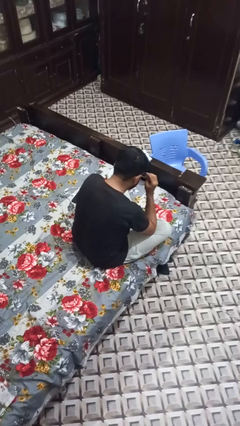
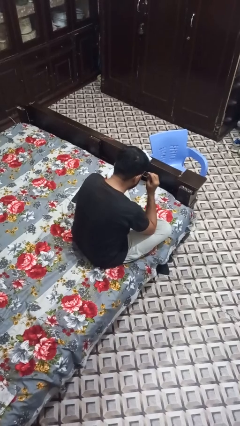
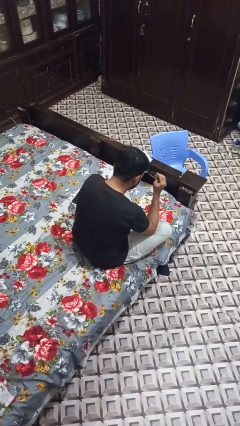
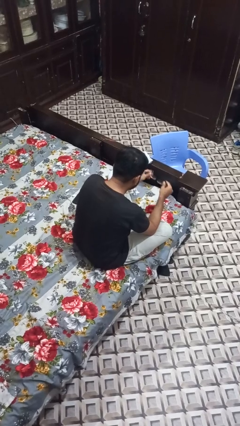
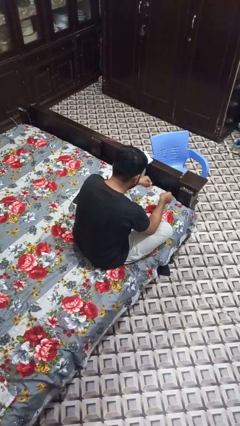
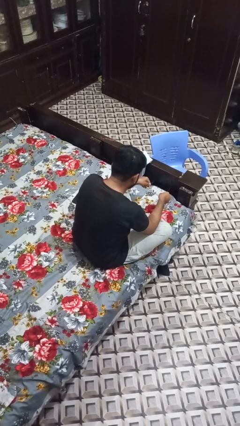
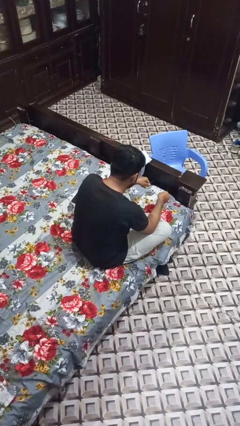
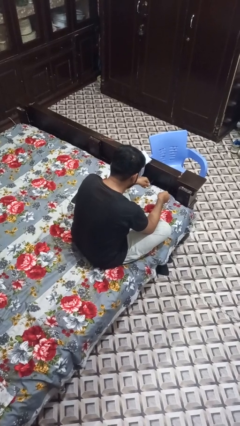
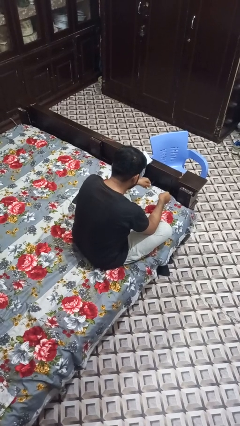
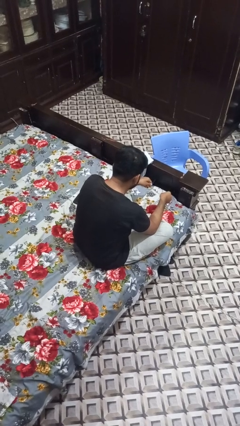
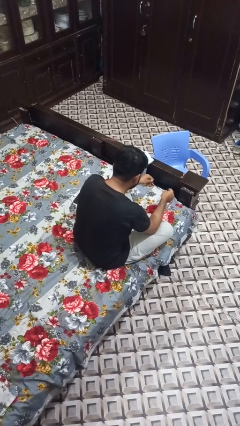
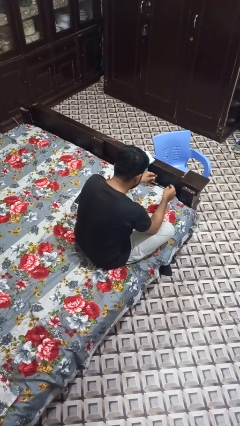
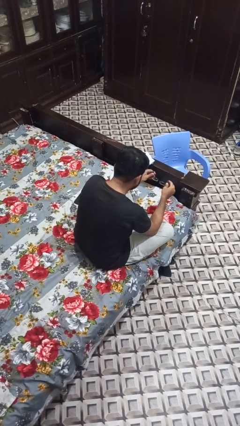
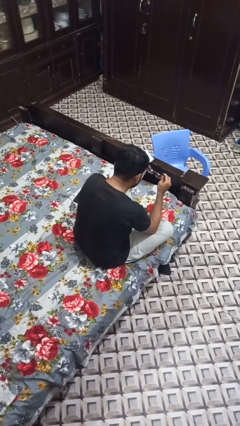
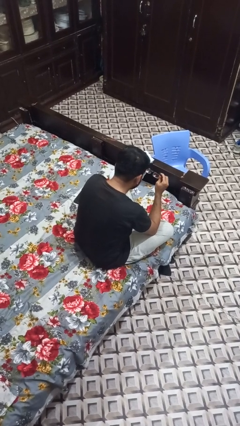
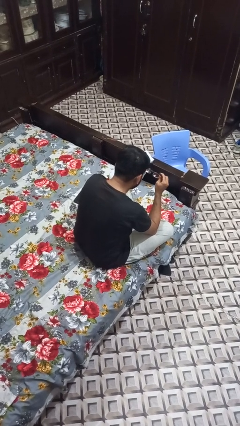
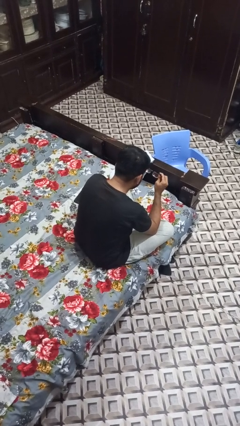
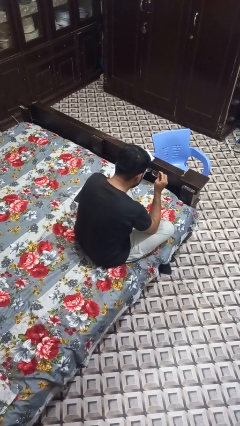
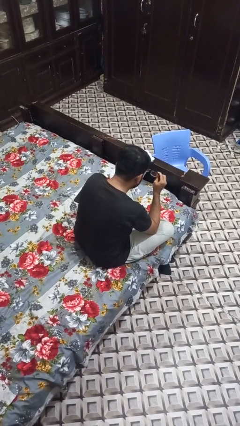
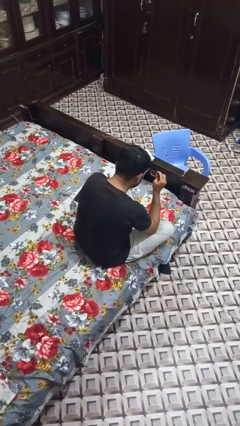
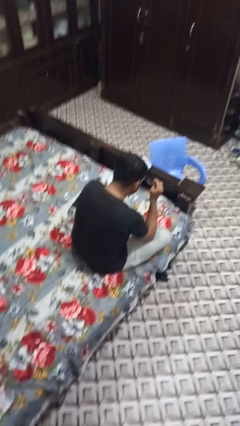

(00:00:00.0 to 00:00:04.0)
person takes off glasses

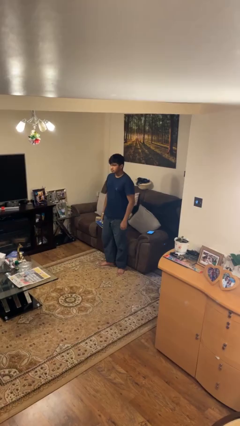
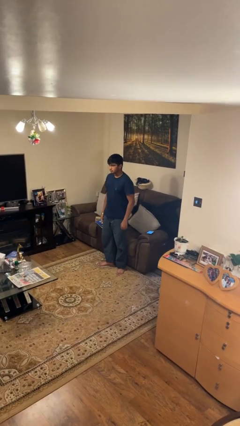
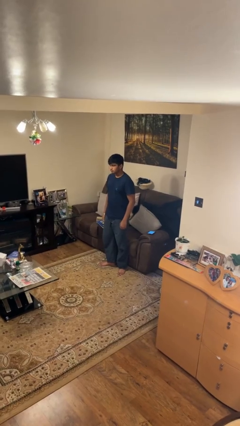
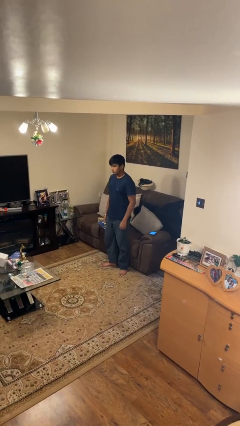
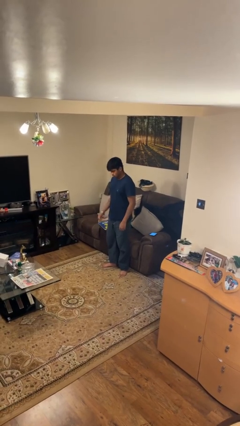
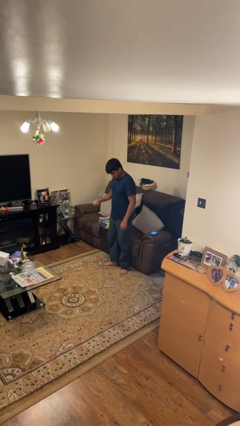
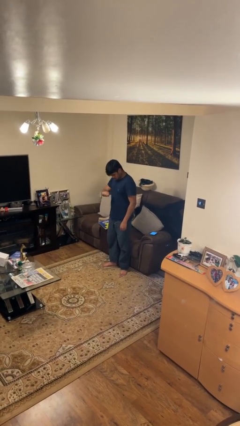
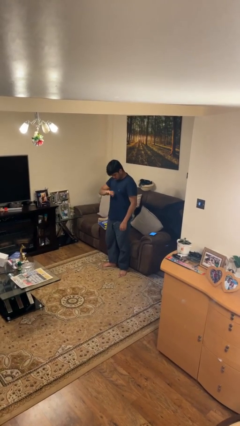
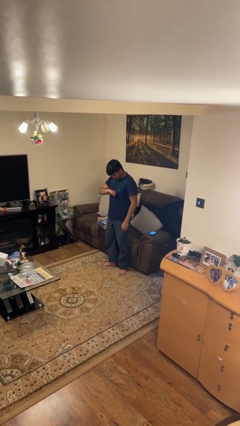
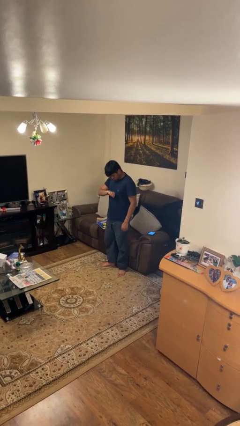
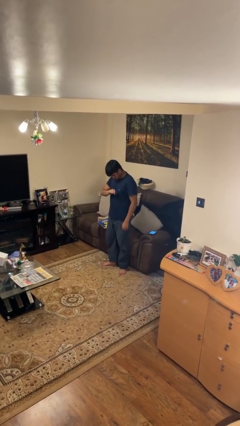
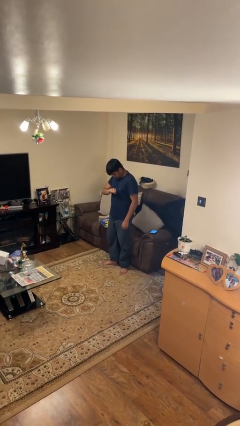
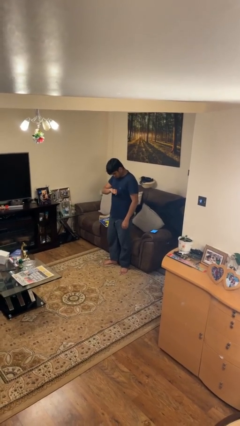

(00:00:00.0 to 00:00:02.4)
person looks at wristwatch

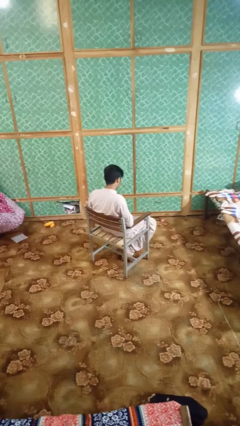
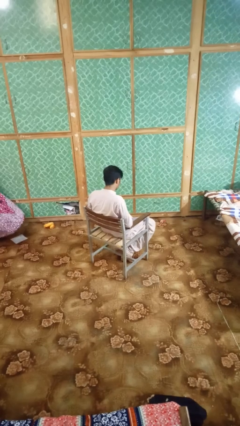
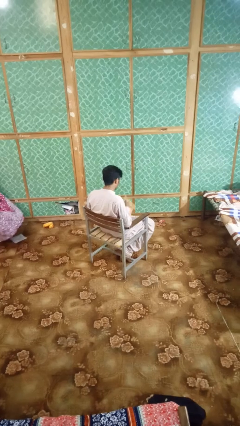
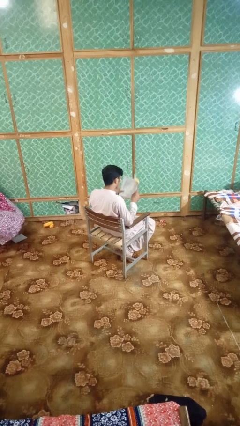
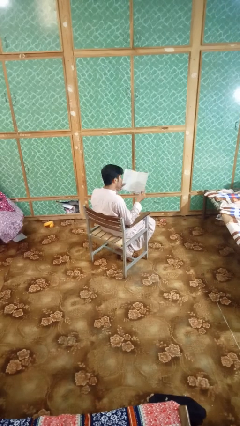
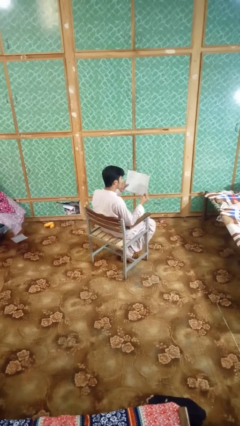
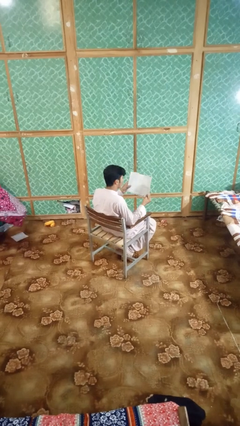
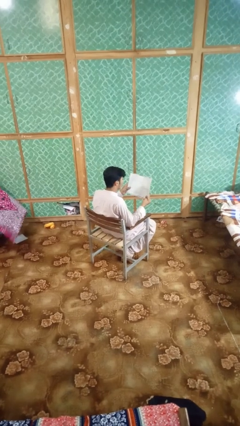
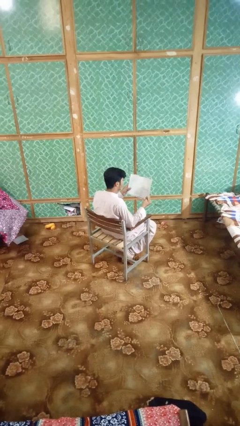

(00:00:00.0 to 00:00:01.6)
person reads book

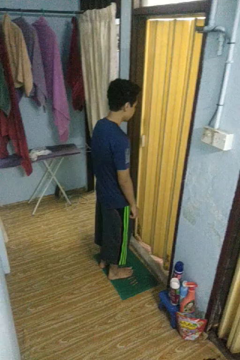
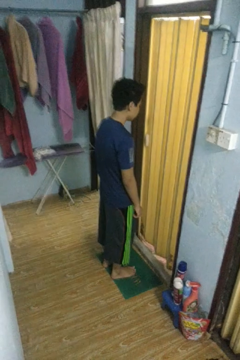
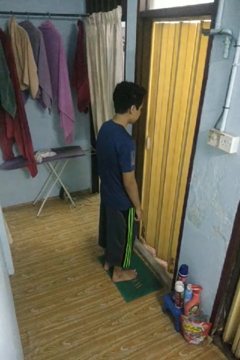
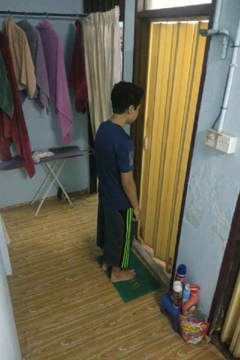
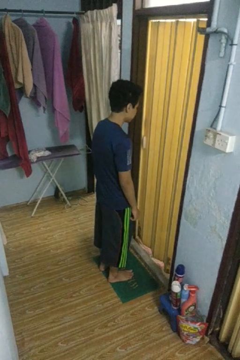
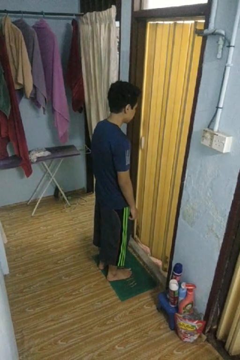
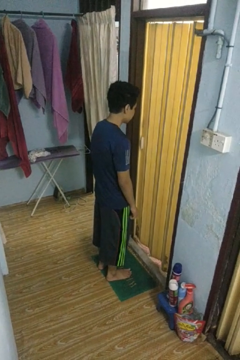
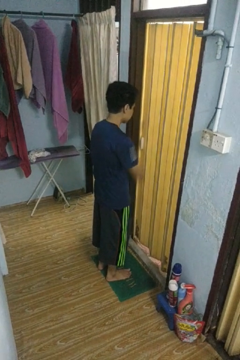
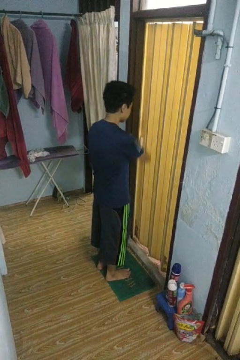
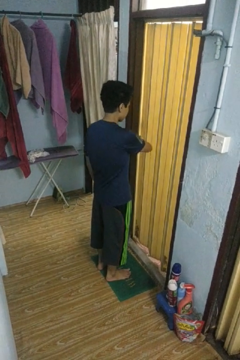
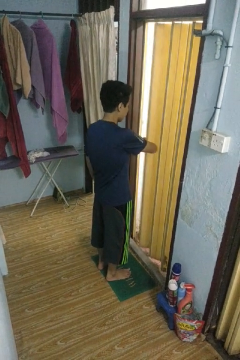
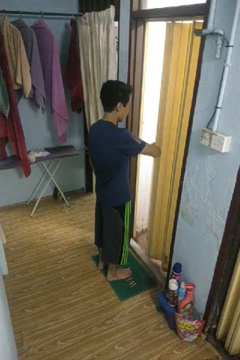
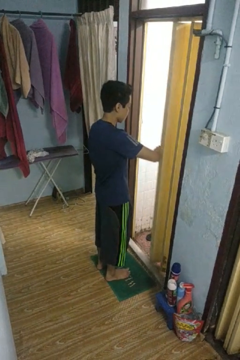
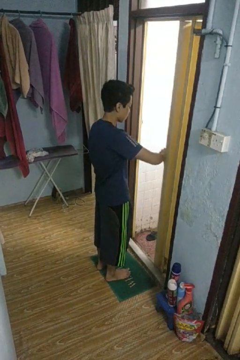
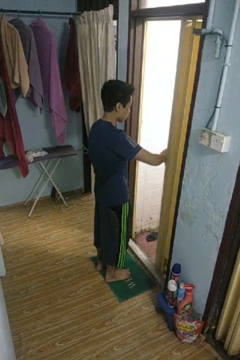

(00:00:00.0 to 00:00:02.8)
person opens sliding door

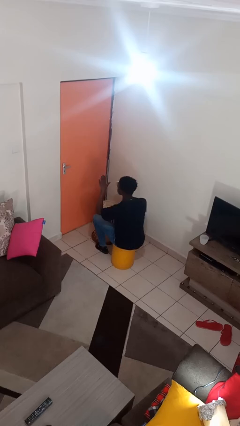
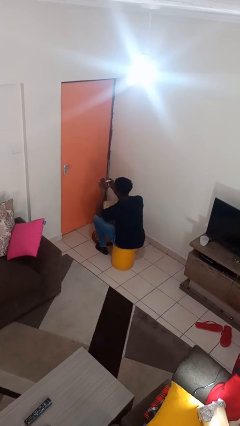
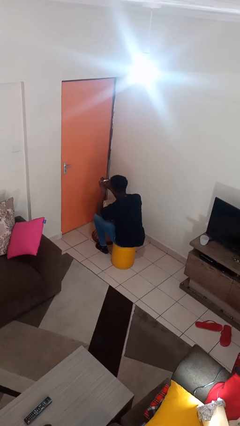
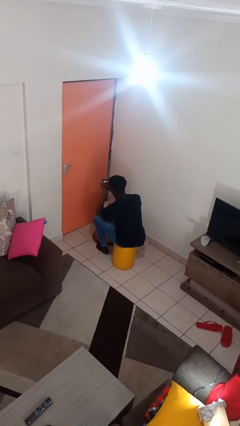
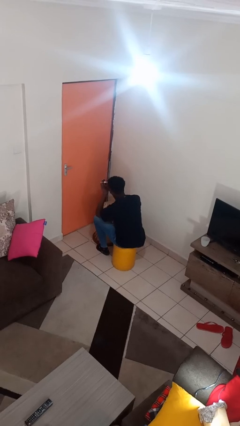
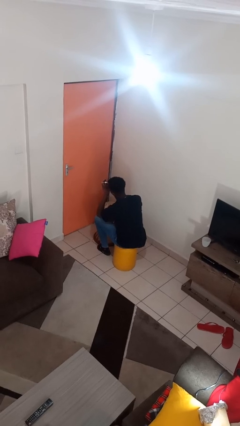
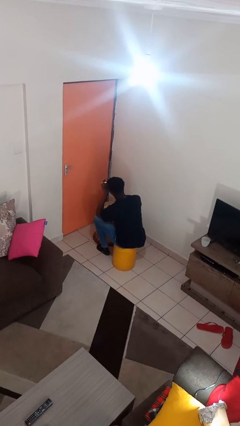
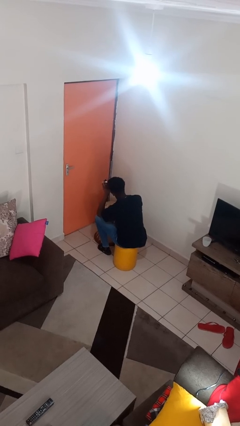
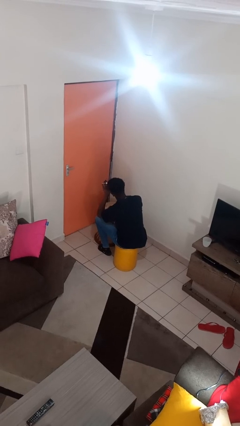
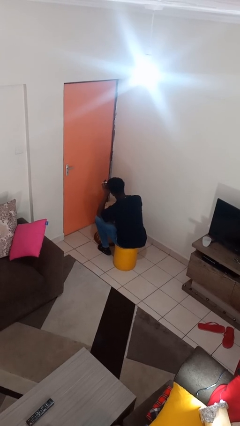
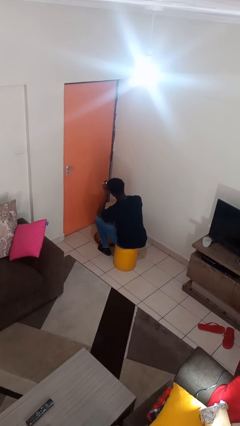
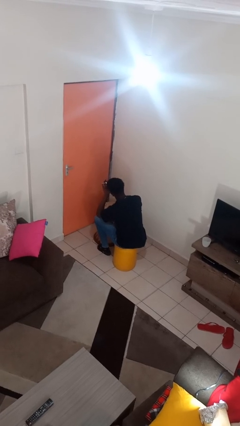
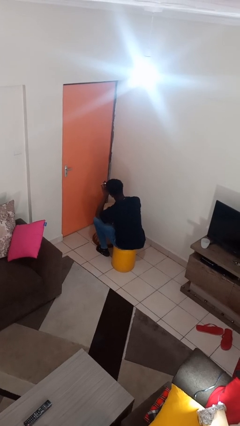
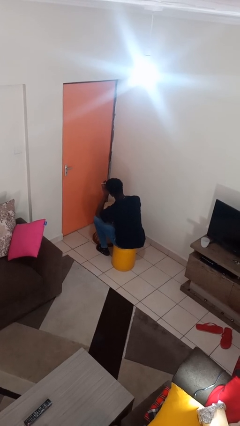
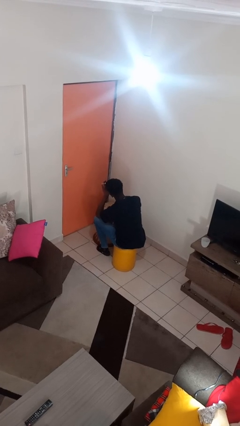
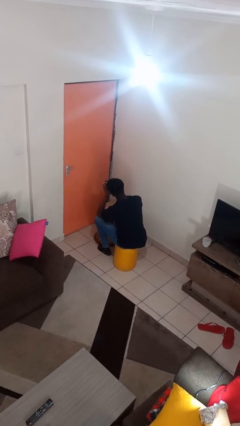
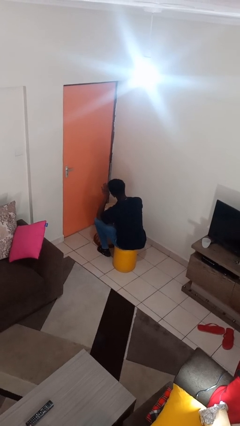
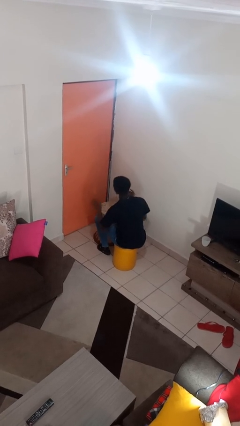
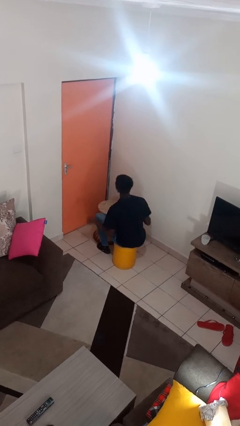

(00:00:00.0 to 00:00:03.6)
person paints fingernails

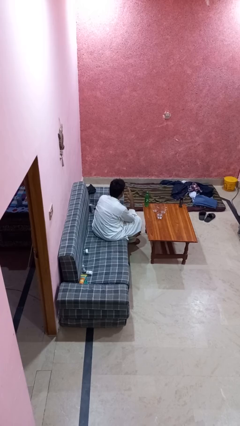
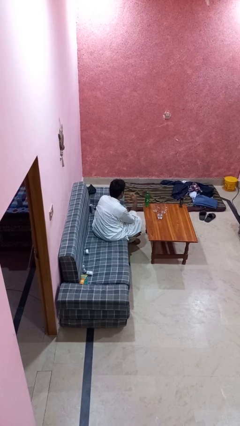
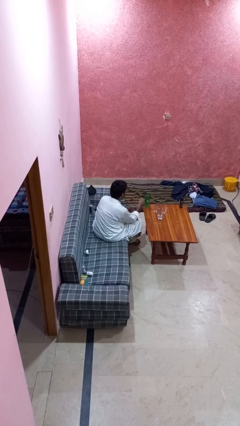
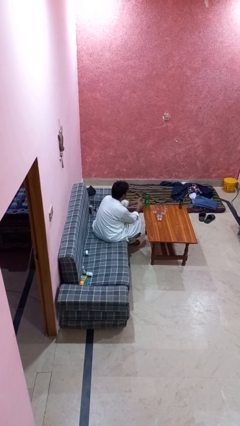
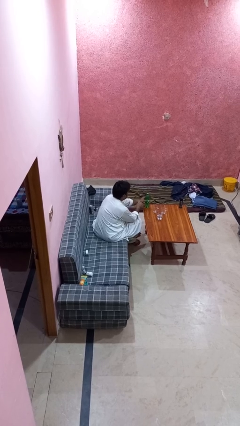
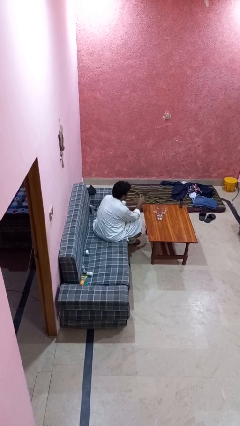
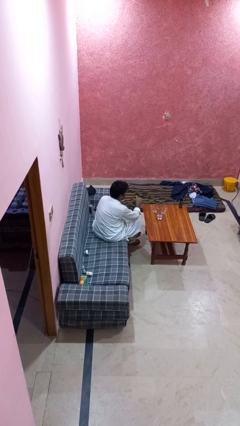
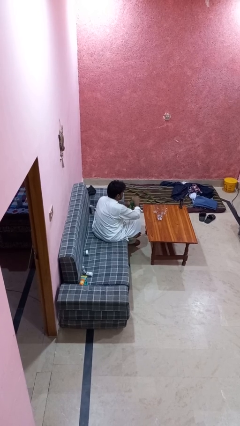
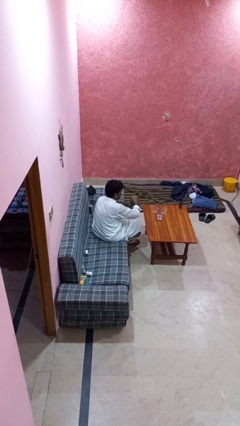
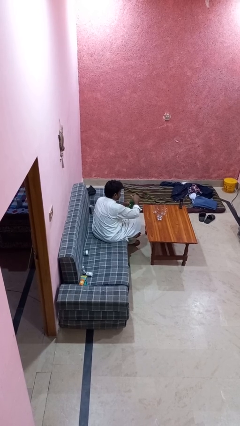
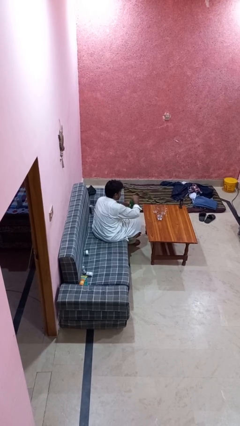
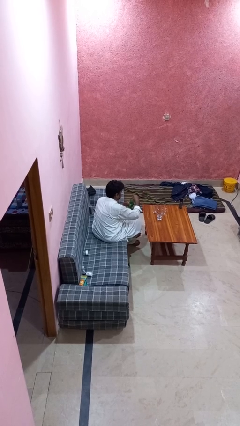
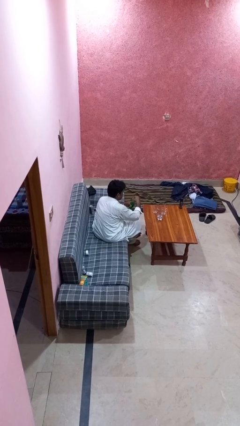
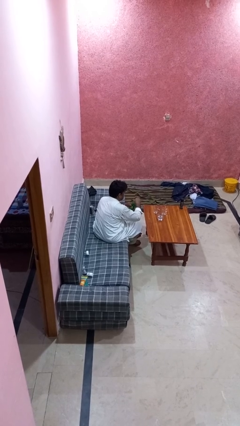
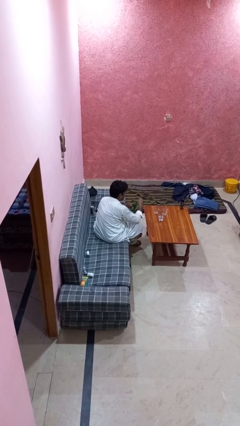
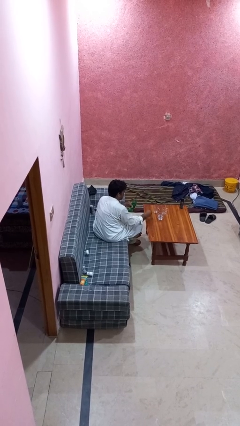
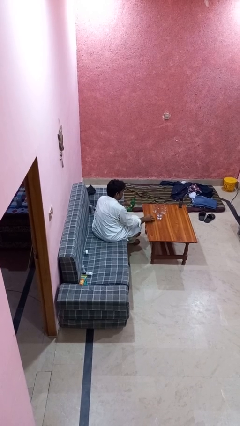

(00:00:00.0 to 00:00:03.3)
person unscrews lid from bottle
